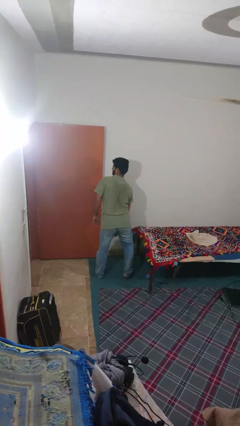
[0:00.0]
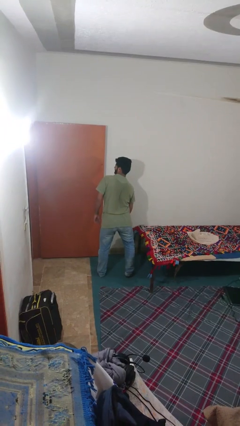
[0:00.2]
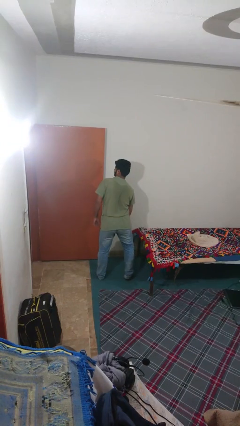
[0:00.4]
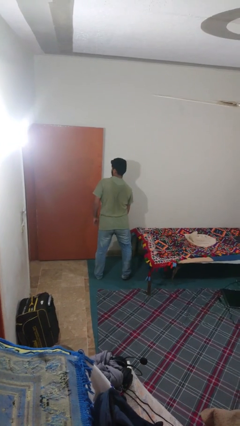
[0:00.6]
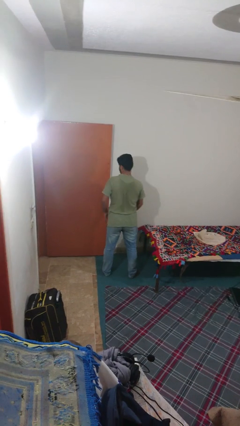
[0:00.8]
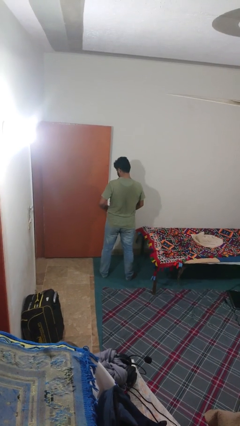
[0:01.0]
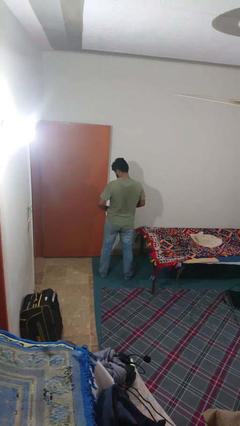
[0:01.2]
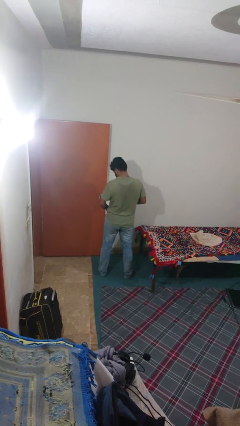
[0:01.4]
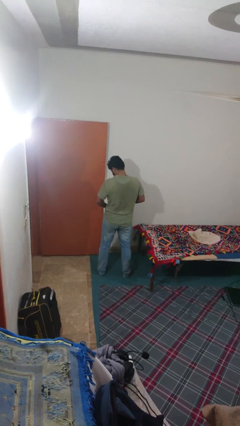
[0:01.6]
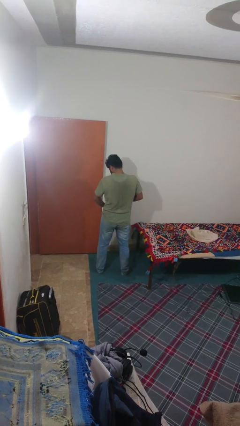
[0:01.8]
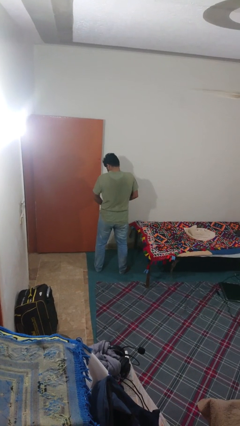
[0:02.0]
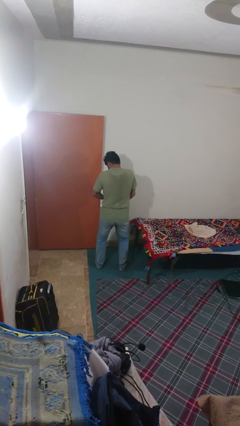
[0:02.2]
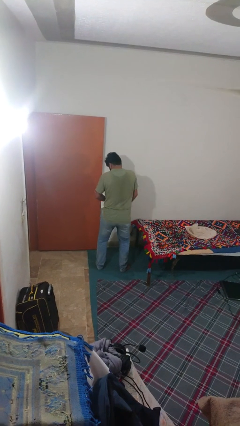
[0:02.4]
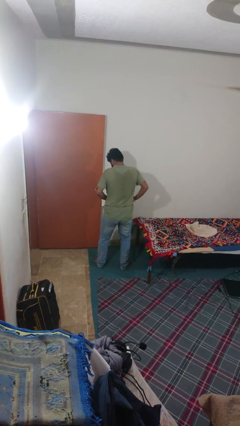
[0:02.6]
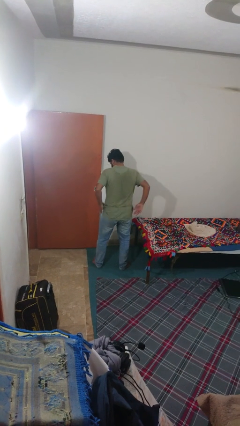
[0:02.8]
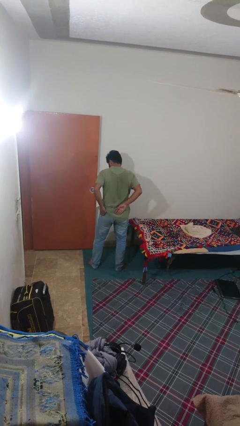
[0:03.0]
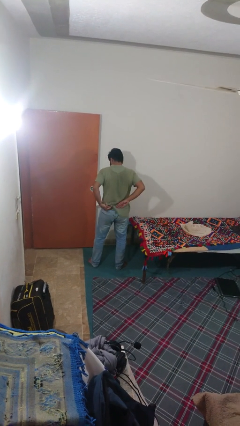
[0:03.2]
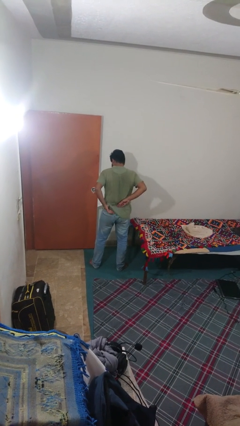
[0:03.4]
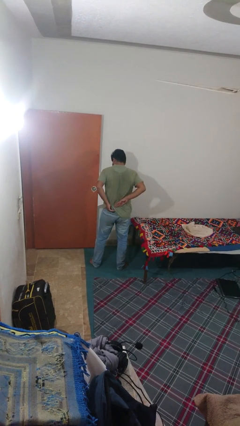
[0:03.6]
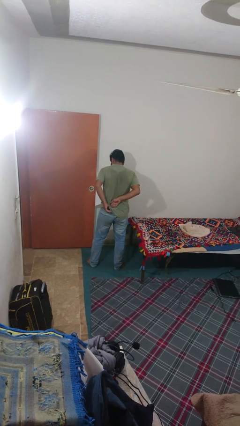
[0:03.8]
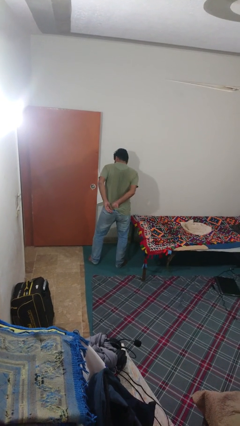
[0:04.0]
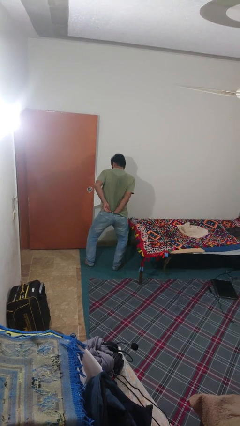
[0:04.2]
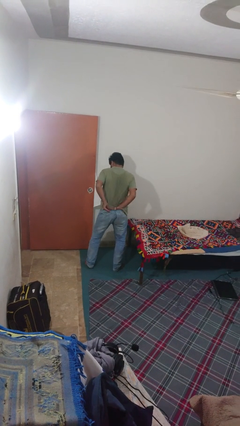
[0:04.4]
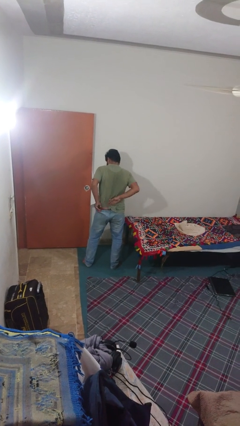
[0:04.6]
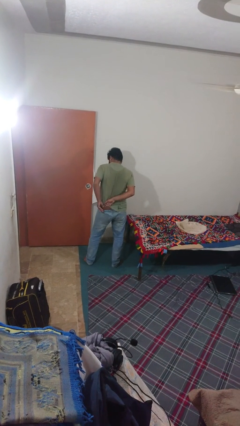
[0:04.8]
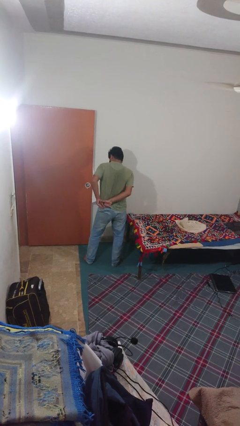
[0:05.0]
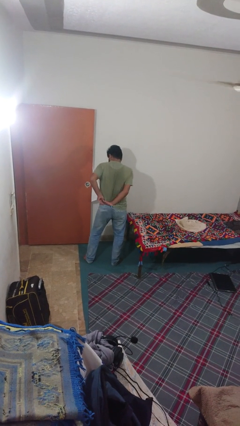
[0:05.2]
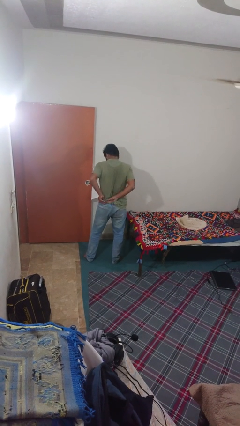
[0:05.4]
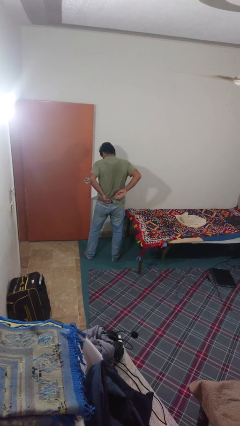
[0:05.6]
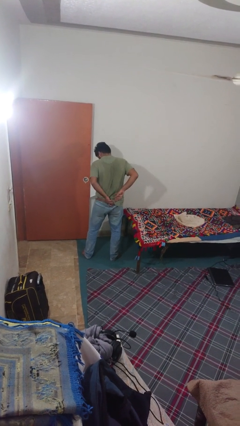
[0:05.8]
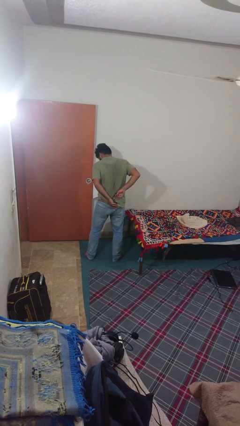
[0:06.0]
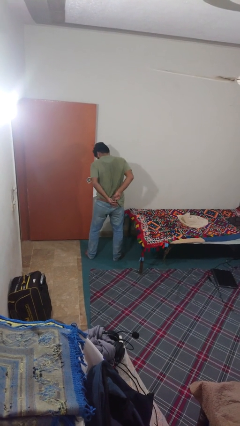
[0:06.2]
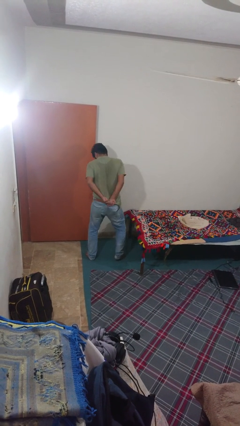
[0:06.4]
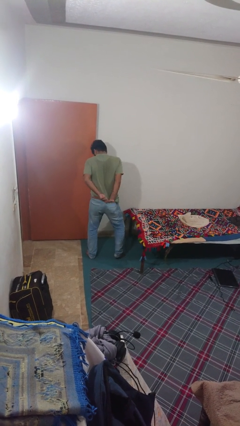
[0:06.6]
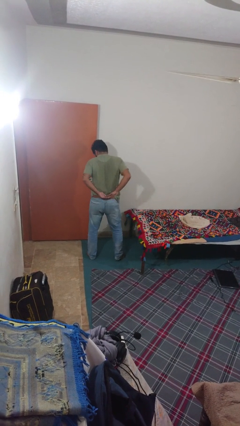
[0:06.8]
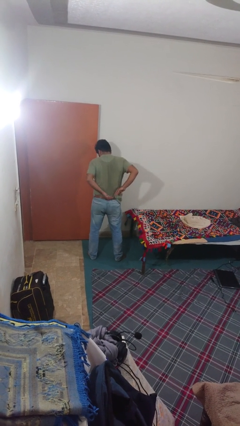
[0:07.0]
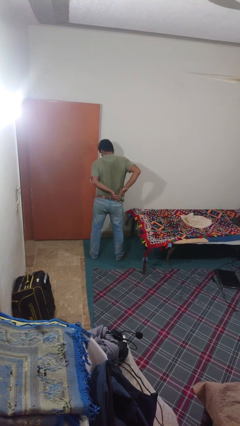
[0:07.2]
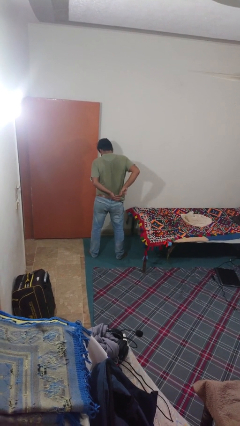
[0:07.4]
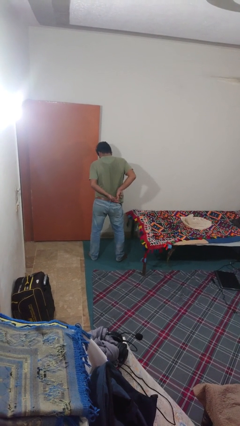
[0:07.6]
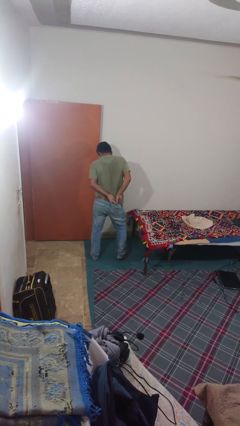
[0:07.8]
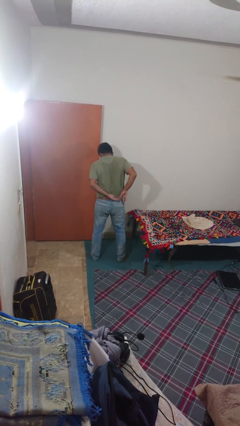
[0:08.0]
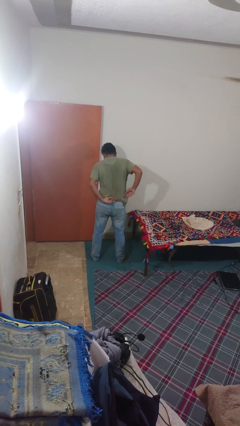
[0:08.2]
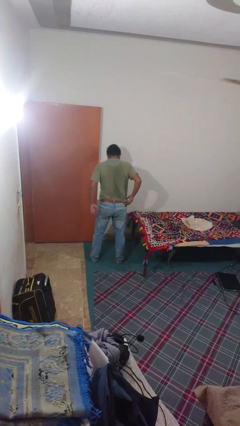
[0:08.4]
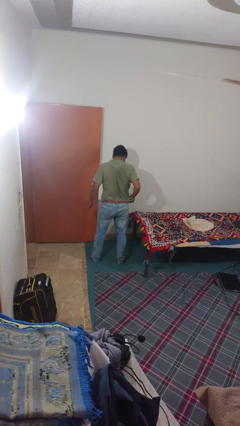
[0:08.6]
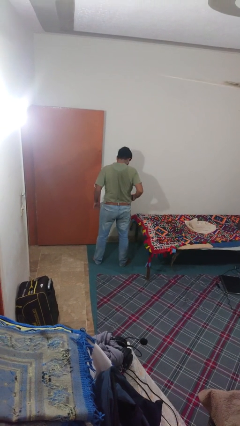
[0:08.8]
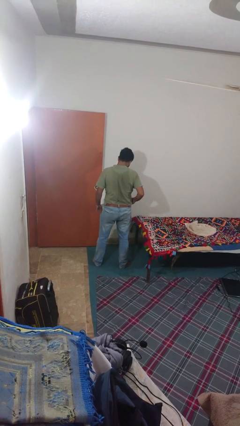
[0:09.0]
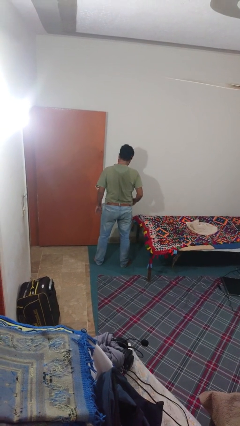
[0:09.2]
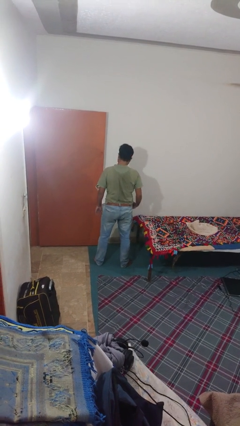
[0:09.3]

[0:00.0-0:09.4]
person tucks in shirt

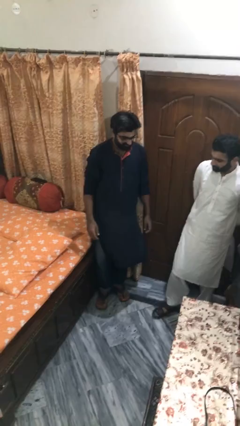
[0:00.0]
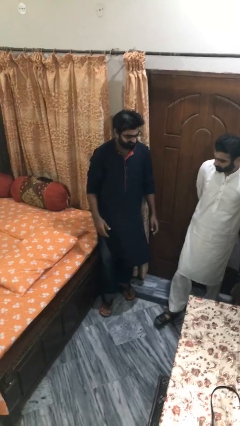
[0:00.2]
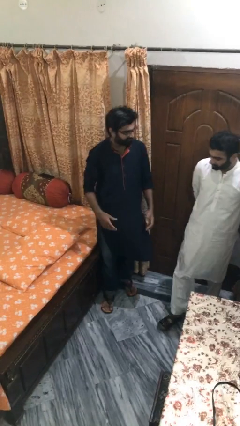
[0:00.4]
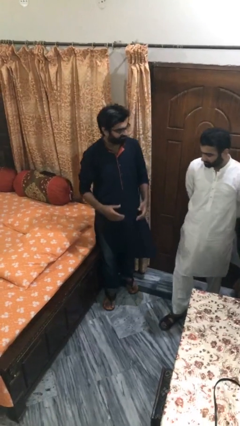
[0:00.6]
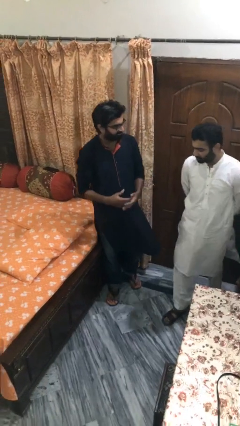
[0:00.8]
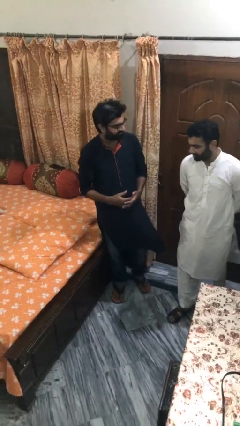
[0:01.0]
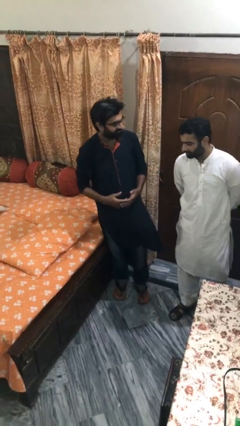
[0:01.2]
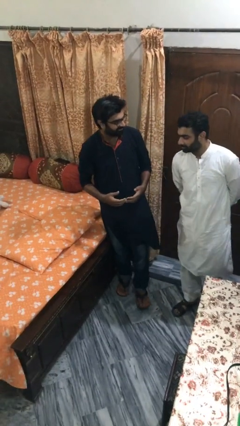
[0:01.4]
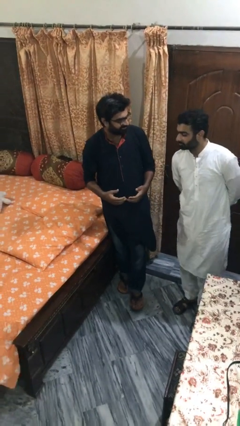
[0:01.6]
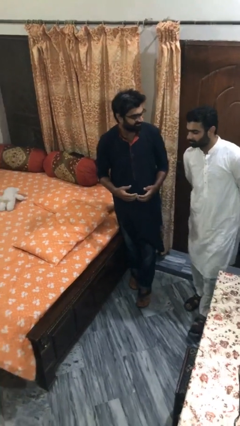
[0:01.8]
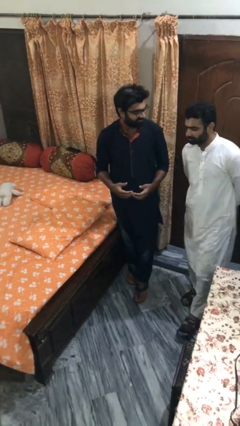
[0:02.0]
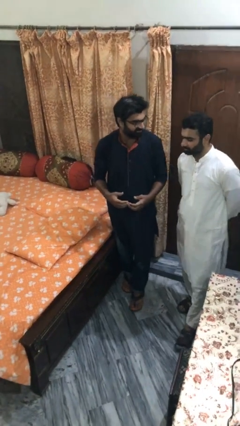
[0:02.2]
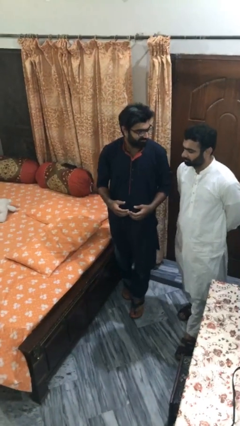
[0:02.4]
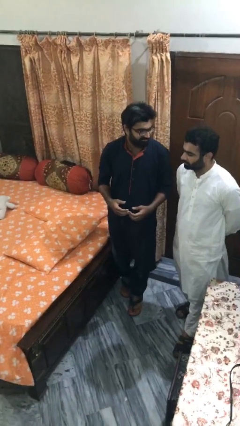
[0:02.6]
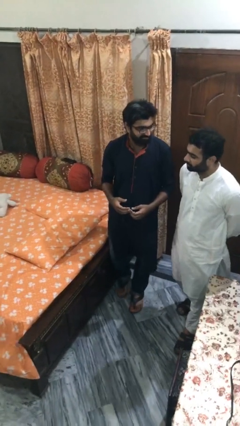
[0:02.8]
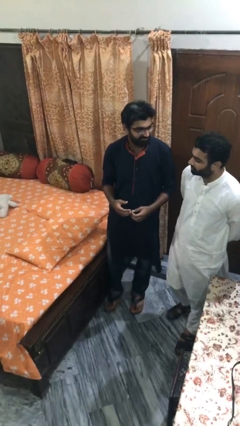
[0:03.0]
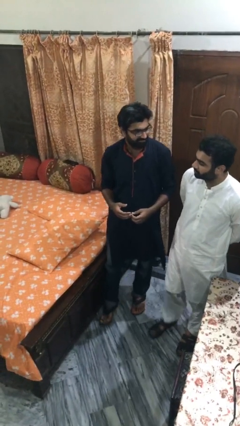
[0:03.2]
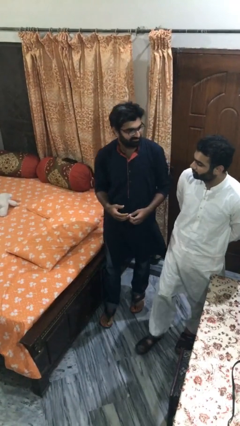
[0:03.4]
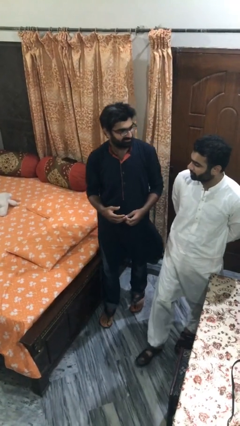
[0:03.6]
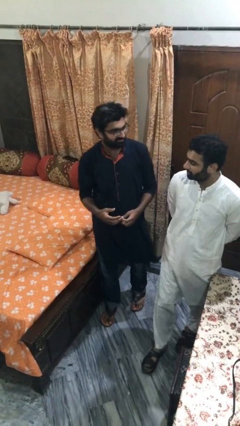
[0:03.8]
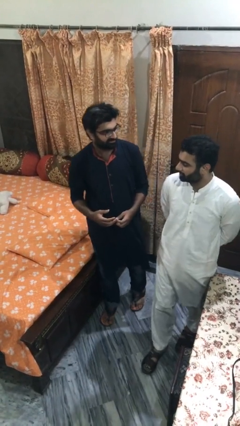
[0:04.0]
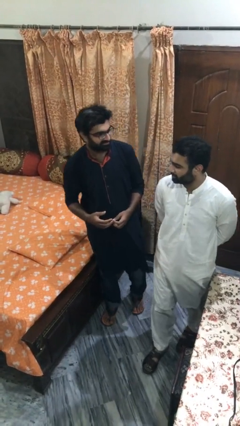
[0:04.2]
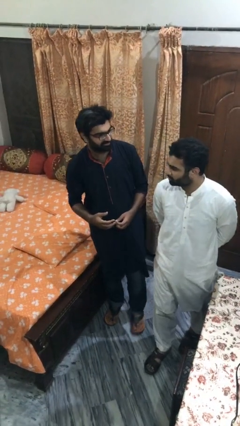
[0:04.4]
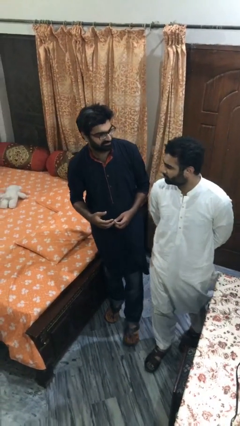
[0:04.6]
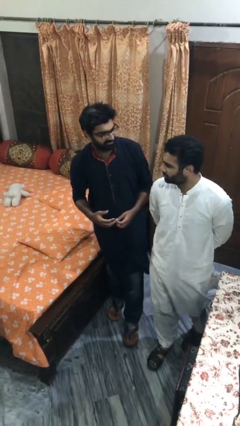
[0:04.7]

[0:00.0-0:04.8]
person talks to person

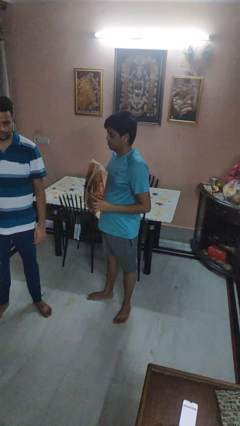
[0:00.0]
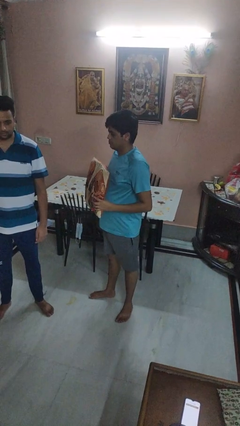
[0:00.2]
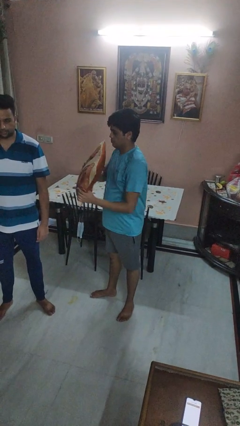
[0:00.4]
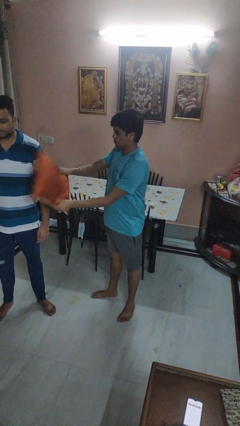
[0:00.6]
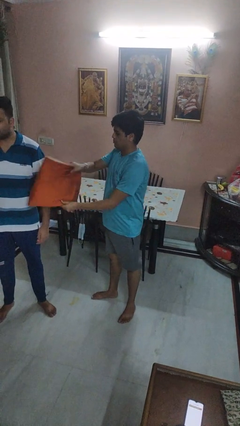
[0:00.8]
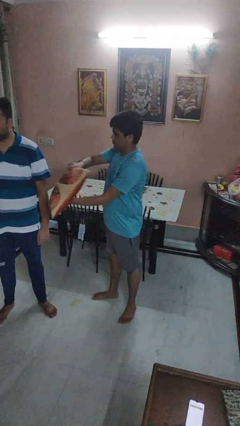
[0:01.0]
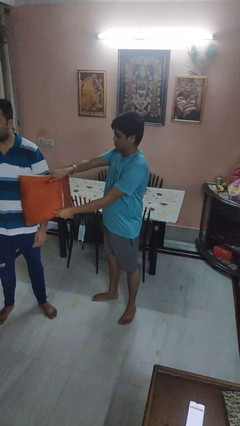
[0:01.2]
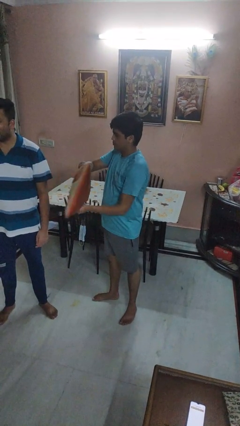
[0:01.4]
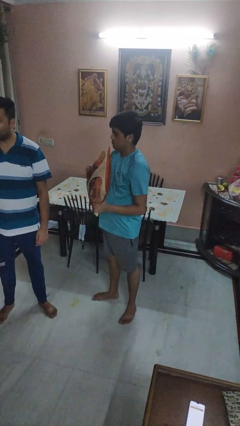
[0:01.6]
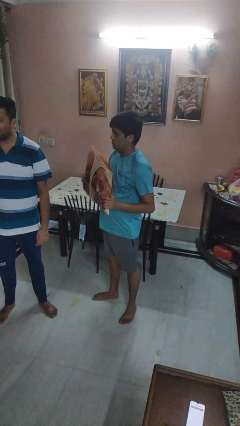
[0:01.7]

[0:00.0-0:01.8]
person hits person with pillow

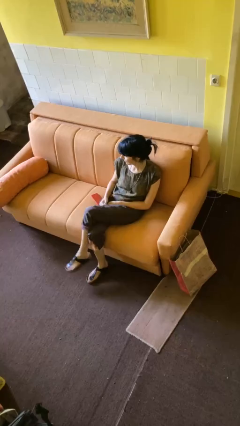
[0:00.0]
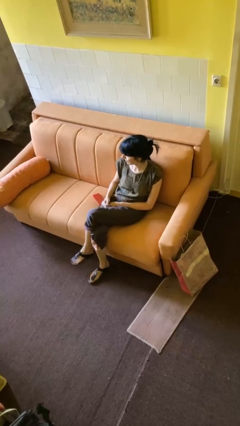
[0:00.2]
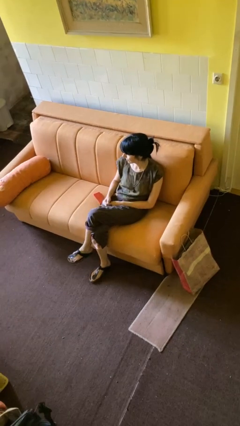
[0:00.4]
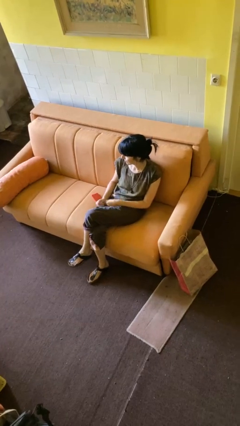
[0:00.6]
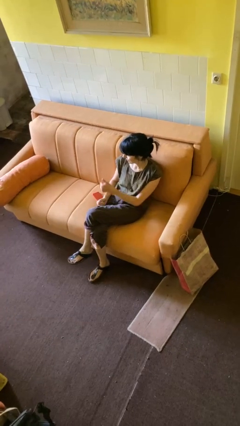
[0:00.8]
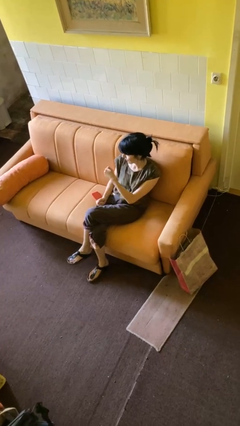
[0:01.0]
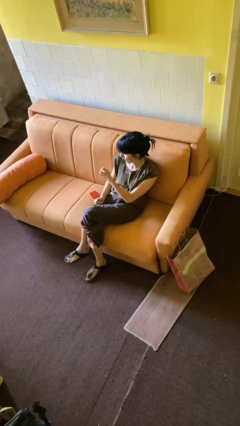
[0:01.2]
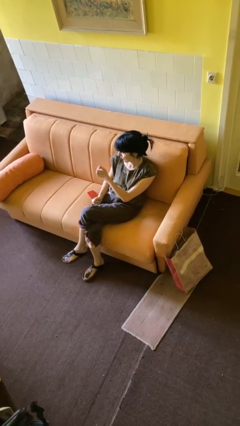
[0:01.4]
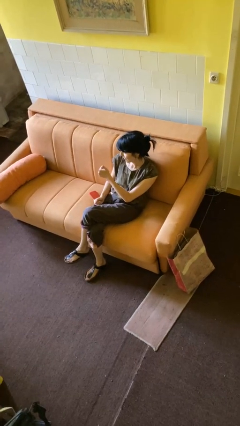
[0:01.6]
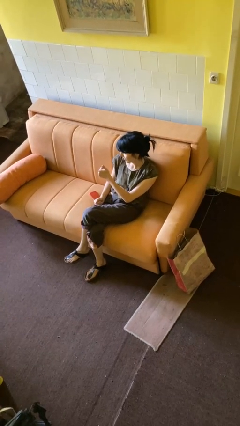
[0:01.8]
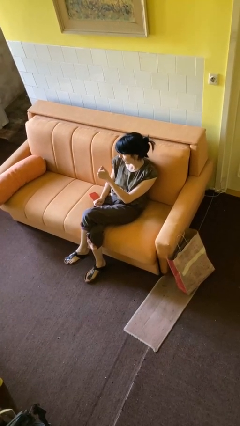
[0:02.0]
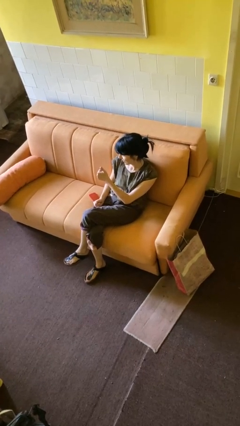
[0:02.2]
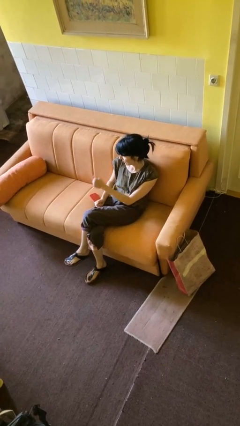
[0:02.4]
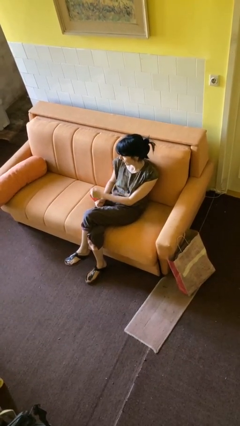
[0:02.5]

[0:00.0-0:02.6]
person gestures thumbs up
